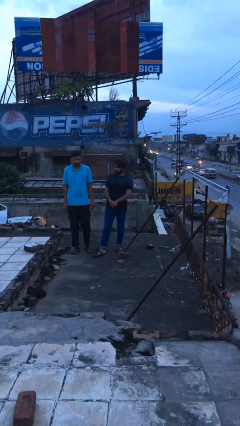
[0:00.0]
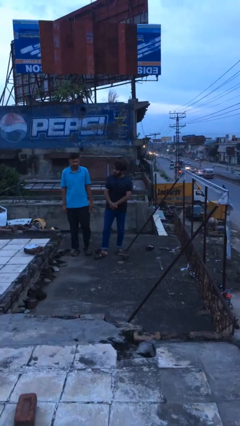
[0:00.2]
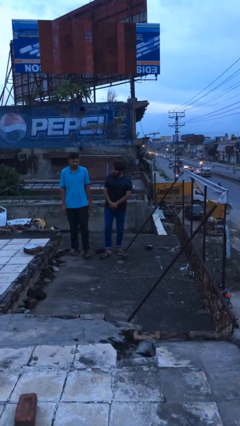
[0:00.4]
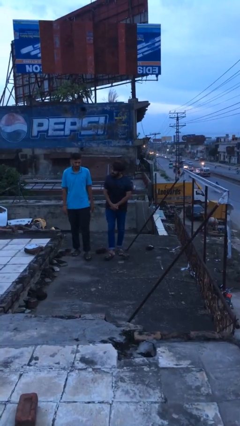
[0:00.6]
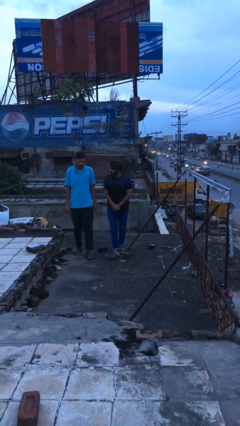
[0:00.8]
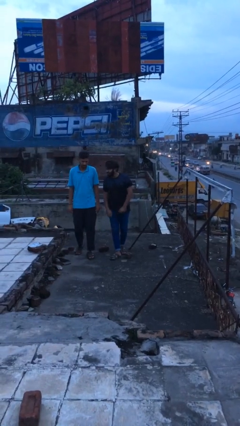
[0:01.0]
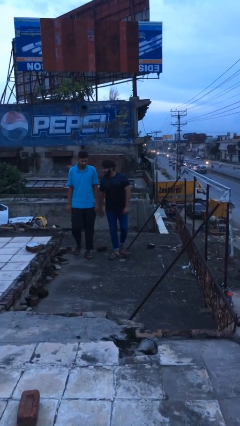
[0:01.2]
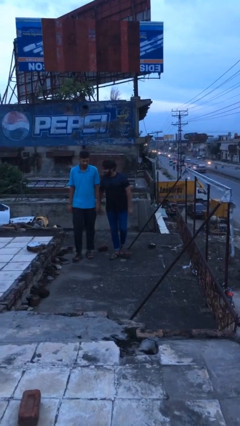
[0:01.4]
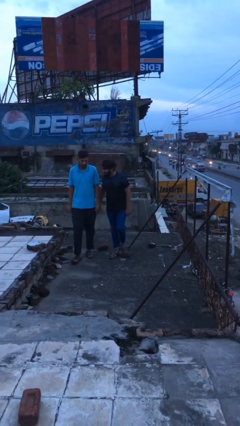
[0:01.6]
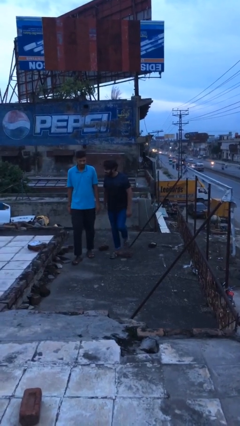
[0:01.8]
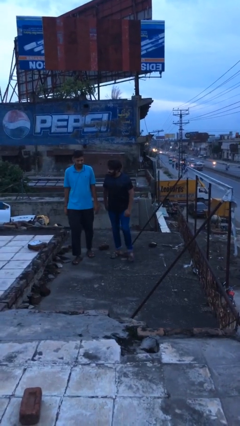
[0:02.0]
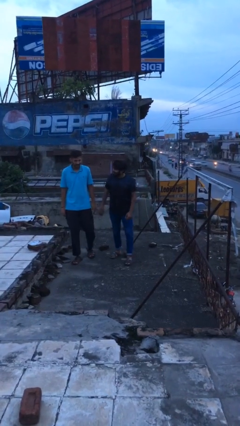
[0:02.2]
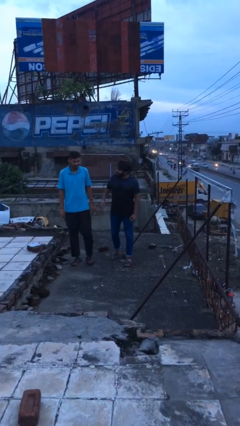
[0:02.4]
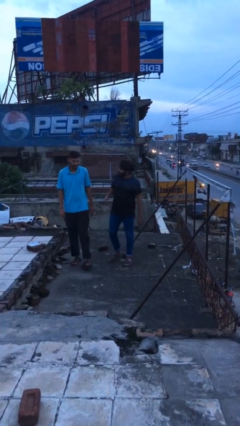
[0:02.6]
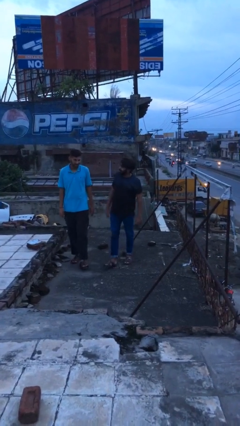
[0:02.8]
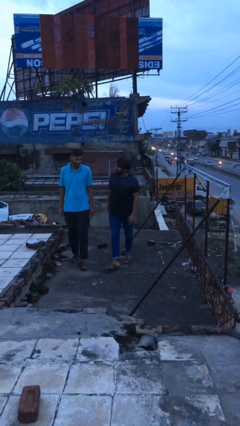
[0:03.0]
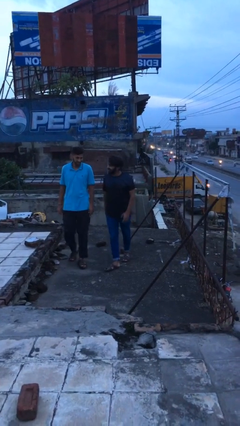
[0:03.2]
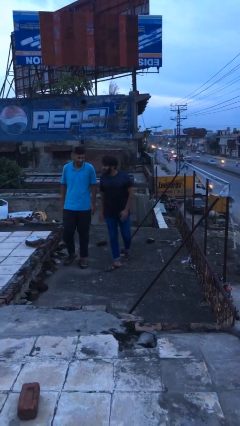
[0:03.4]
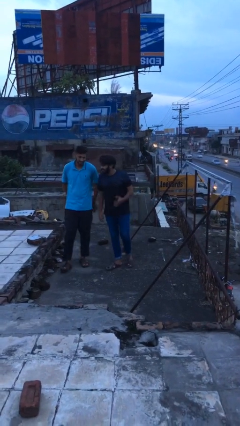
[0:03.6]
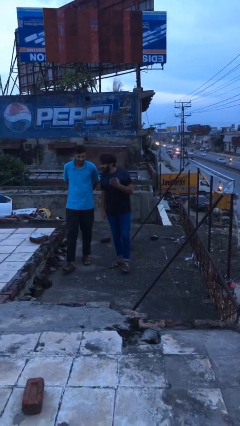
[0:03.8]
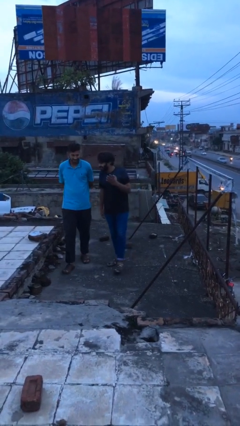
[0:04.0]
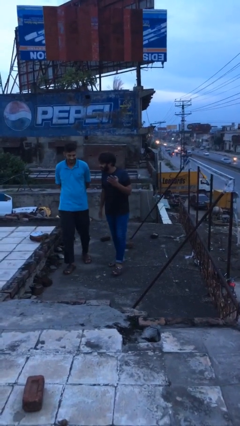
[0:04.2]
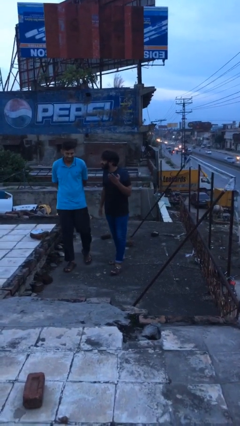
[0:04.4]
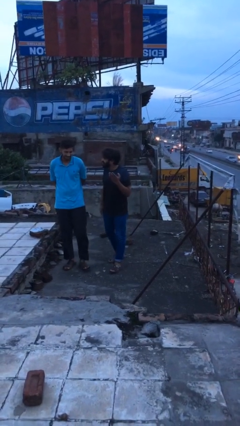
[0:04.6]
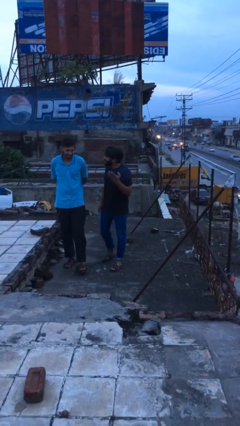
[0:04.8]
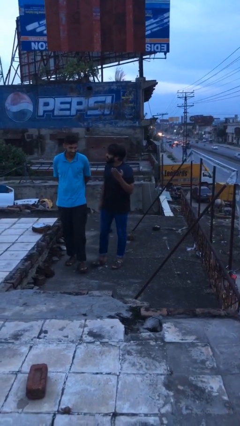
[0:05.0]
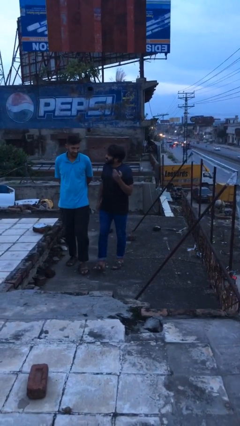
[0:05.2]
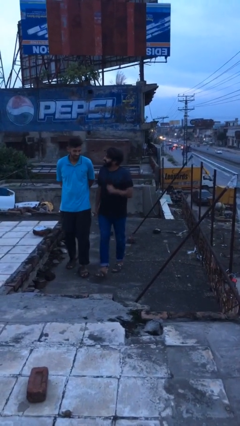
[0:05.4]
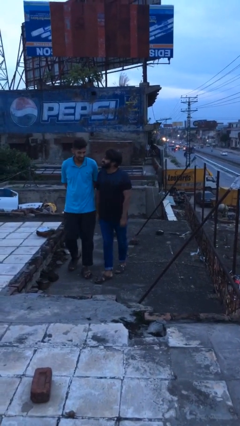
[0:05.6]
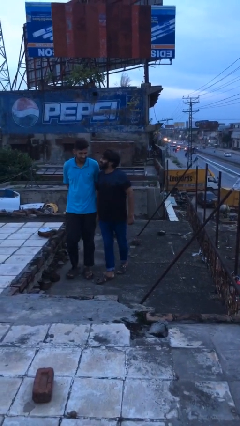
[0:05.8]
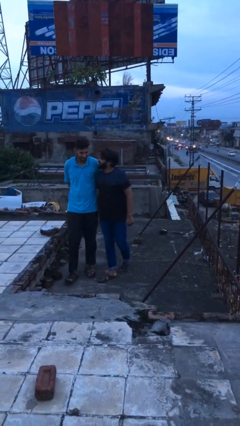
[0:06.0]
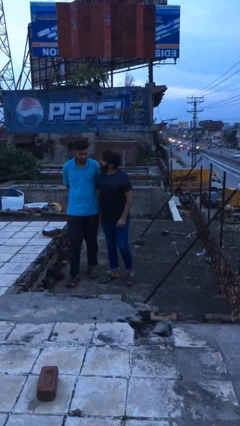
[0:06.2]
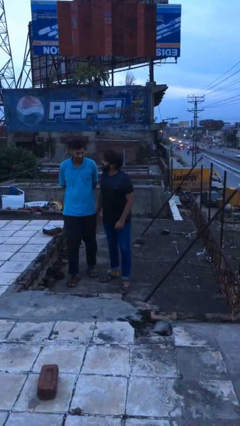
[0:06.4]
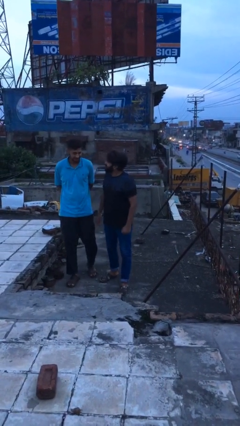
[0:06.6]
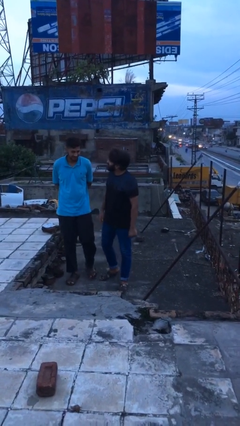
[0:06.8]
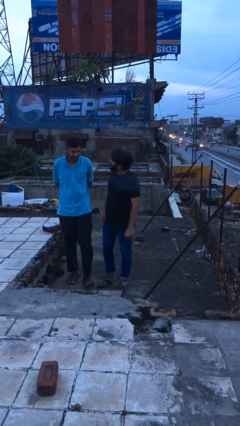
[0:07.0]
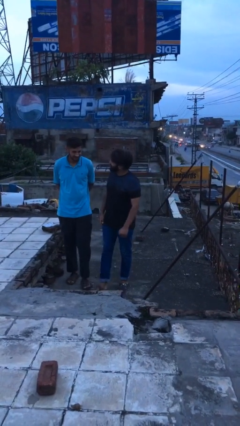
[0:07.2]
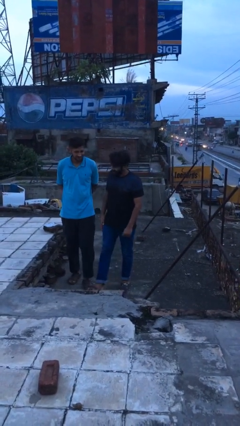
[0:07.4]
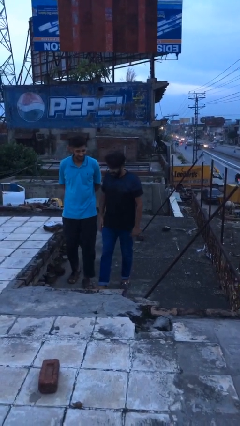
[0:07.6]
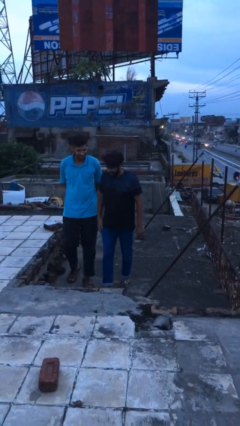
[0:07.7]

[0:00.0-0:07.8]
person talks to person

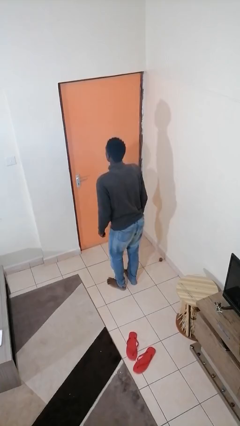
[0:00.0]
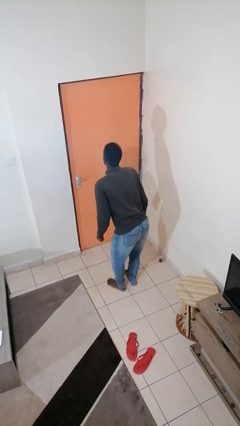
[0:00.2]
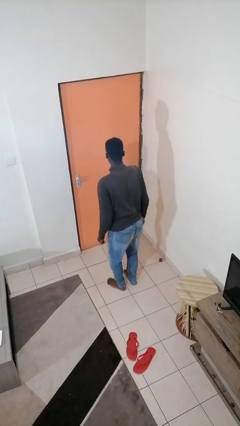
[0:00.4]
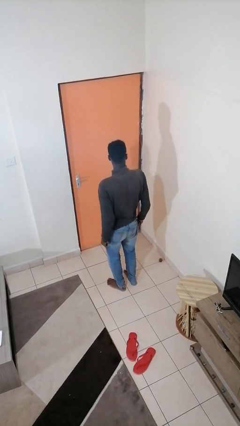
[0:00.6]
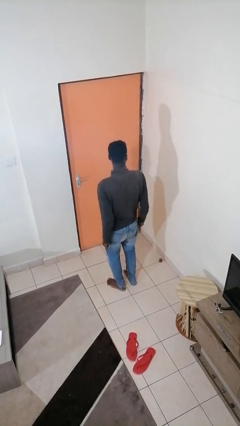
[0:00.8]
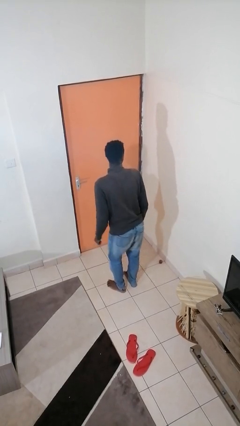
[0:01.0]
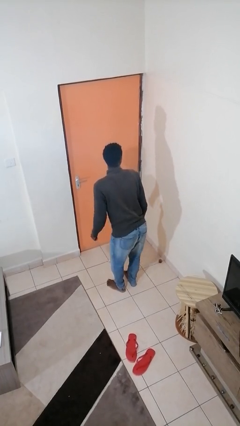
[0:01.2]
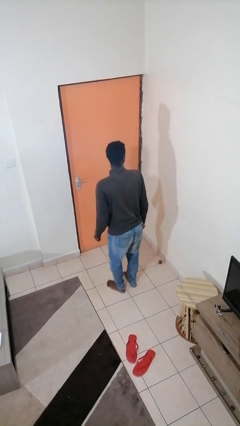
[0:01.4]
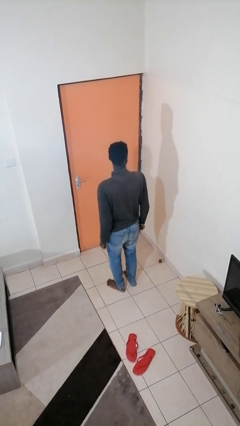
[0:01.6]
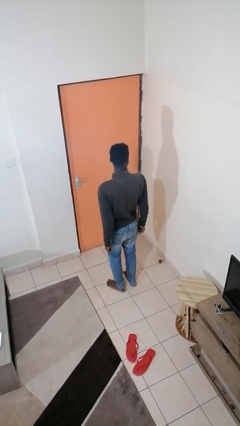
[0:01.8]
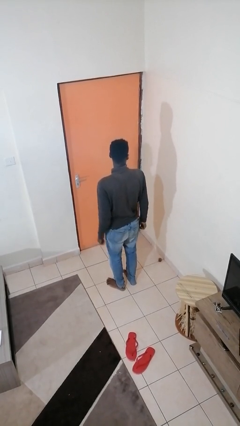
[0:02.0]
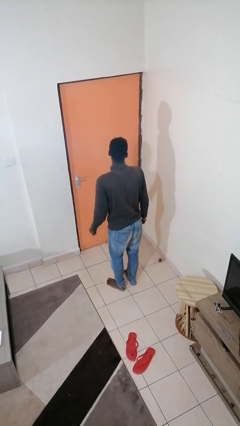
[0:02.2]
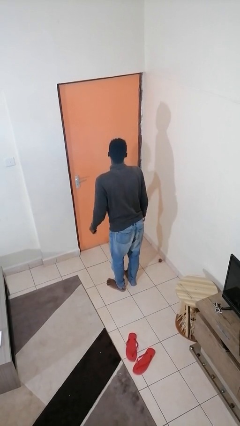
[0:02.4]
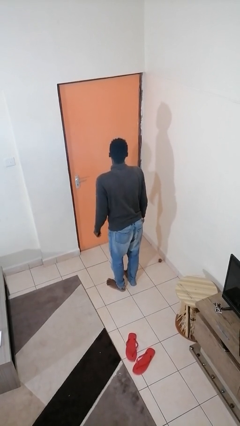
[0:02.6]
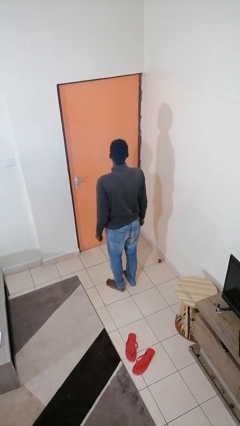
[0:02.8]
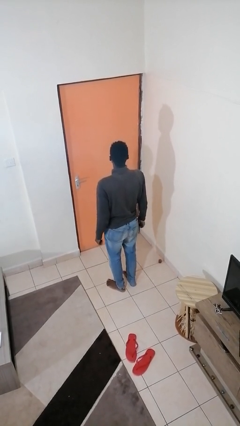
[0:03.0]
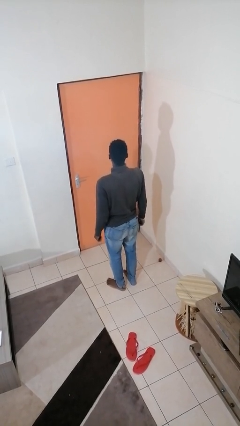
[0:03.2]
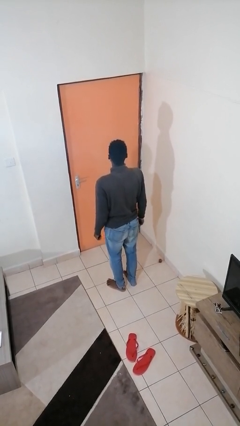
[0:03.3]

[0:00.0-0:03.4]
person wiggles hips

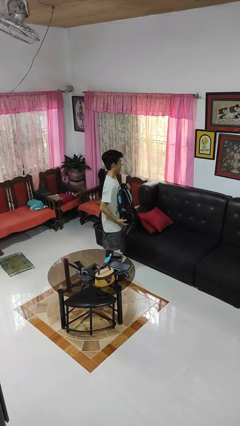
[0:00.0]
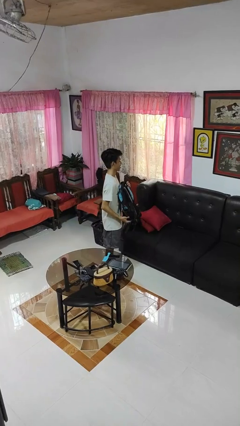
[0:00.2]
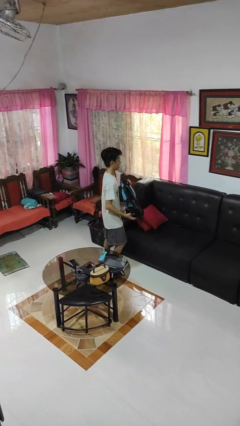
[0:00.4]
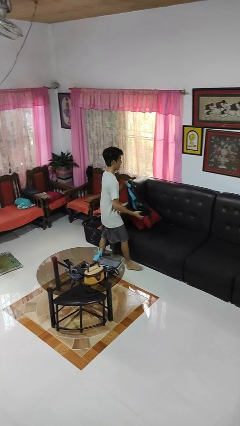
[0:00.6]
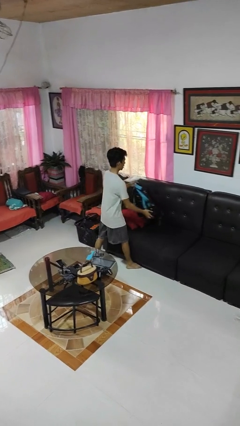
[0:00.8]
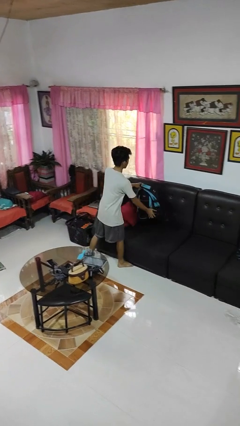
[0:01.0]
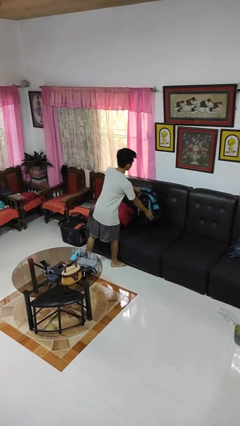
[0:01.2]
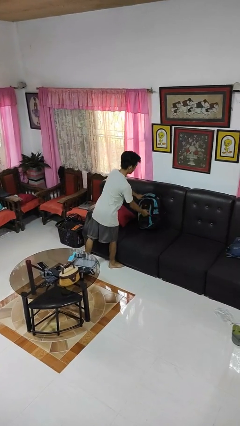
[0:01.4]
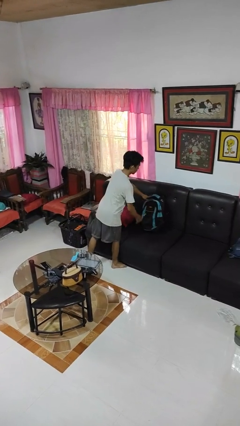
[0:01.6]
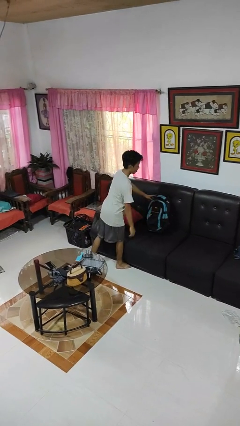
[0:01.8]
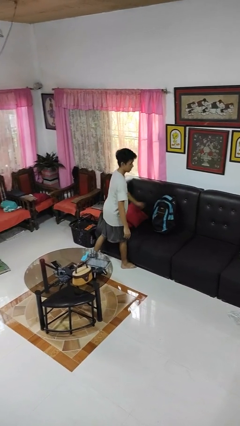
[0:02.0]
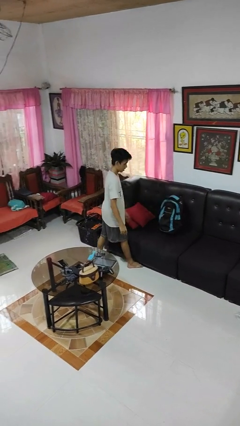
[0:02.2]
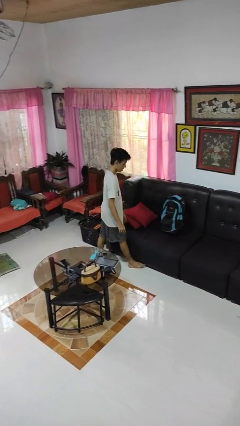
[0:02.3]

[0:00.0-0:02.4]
person puts down object on couch

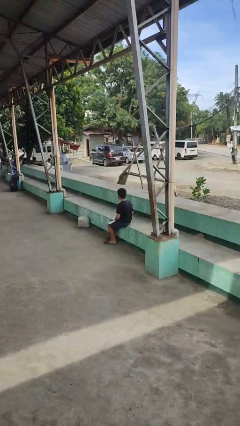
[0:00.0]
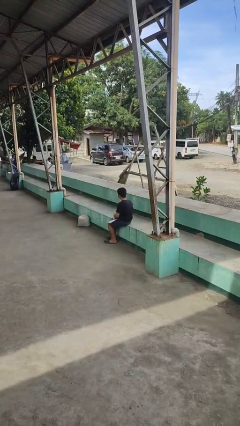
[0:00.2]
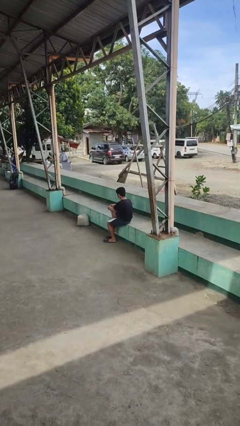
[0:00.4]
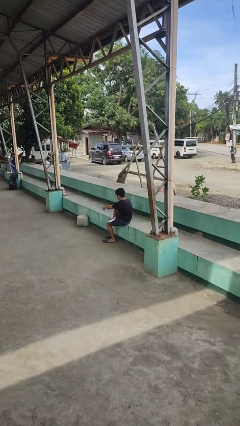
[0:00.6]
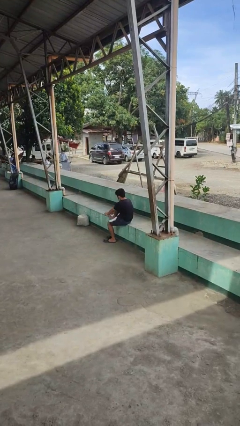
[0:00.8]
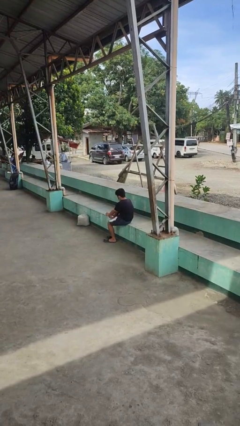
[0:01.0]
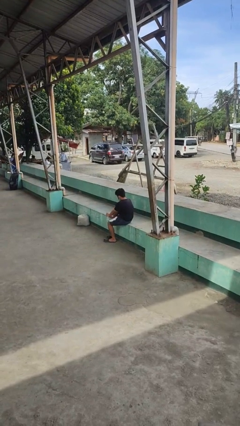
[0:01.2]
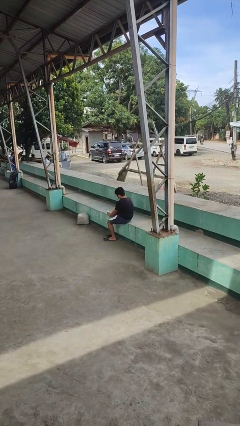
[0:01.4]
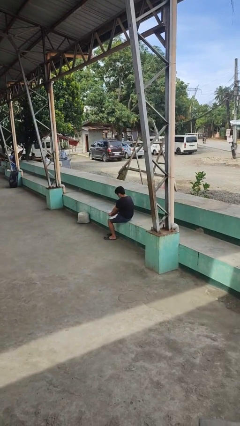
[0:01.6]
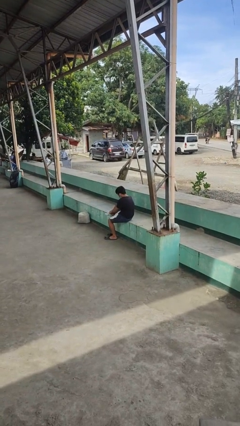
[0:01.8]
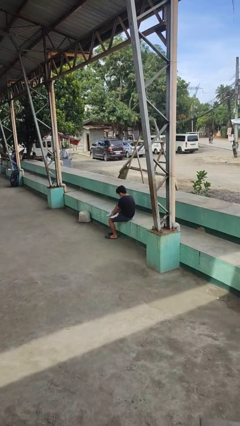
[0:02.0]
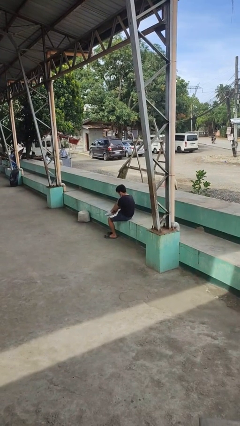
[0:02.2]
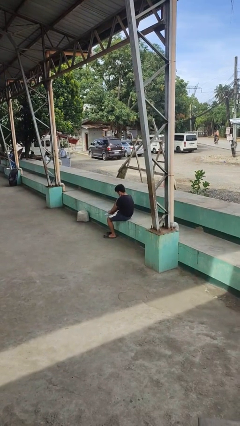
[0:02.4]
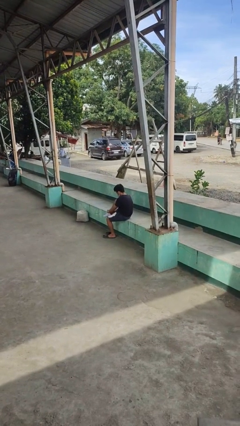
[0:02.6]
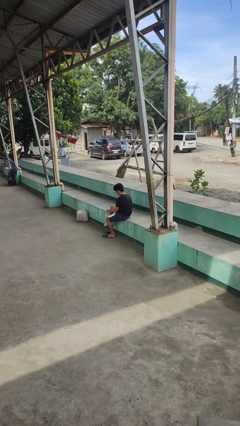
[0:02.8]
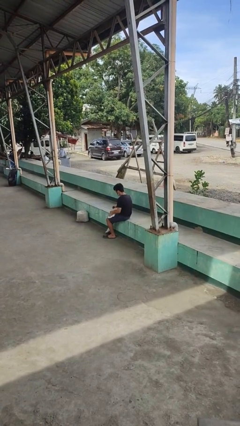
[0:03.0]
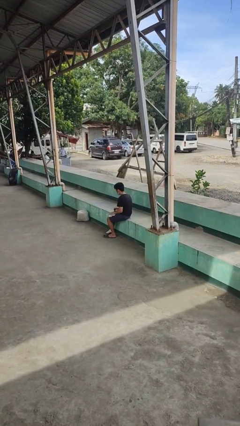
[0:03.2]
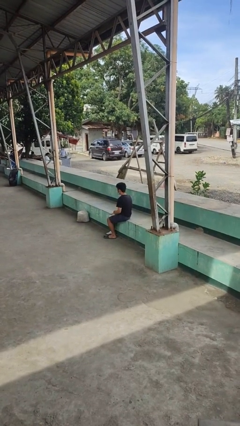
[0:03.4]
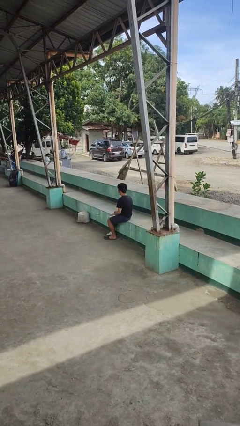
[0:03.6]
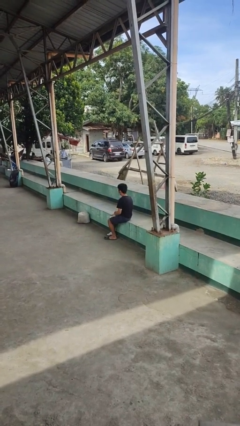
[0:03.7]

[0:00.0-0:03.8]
person puts on socks

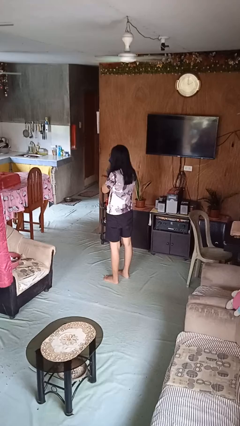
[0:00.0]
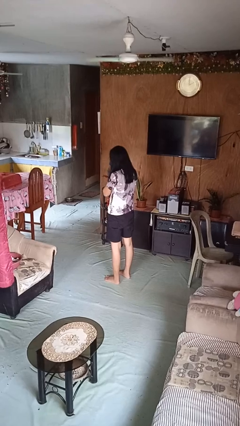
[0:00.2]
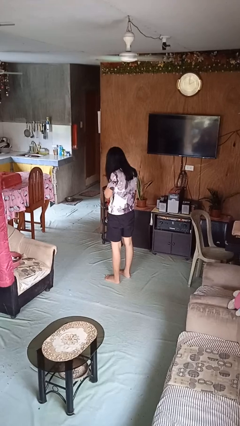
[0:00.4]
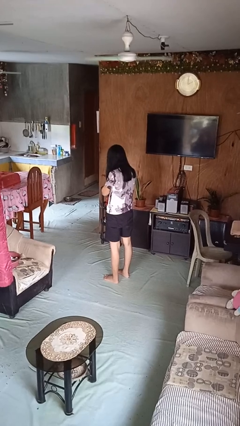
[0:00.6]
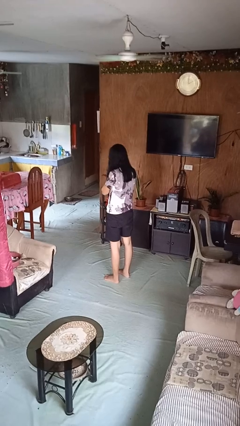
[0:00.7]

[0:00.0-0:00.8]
person blows nose

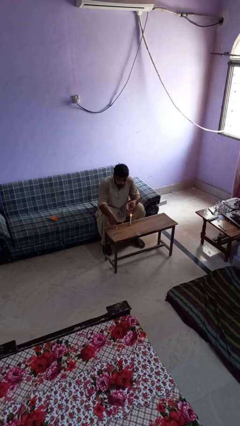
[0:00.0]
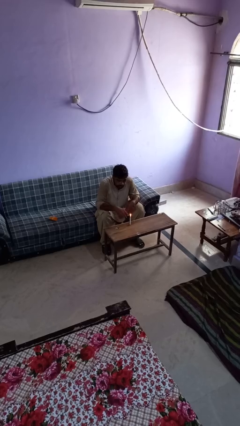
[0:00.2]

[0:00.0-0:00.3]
person lights candle
